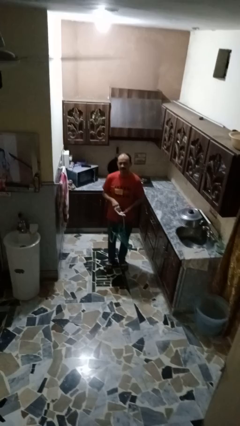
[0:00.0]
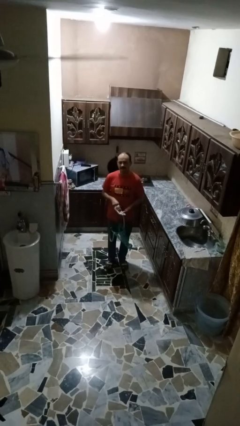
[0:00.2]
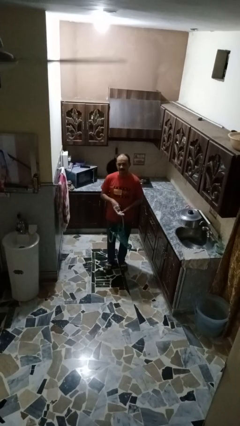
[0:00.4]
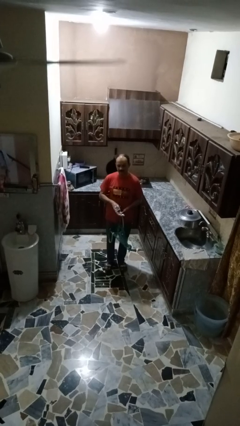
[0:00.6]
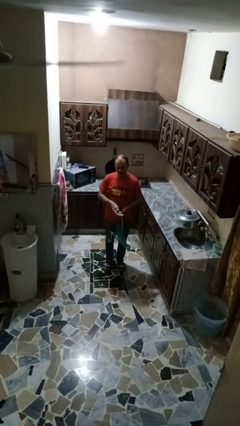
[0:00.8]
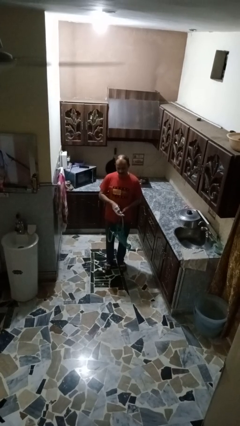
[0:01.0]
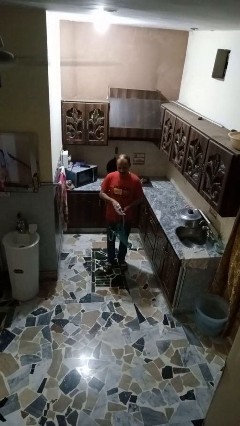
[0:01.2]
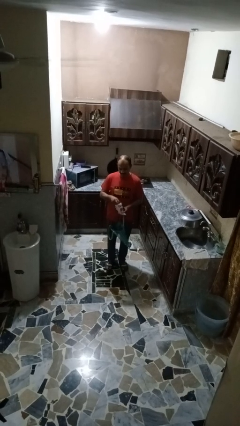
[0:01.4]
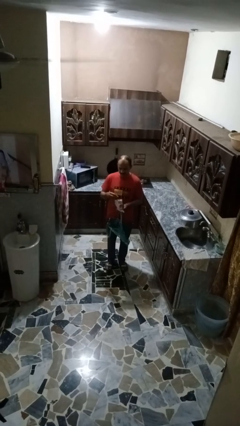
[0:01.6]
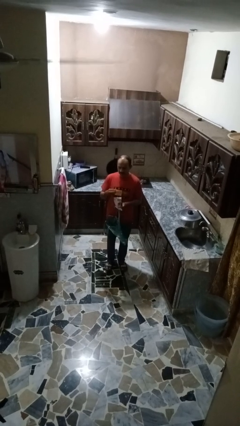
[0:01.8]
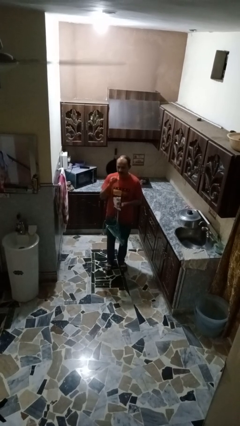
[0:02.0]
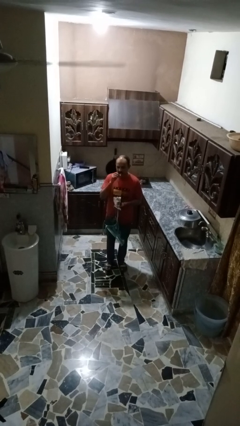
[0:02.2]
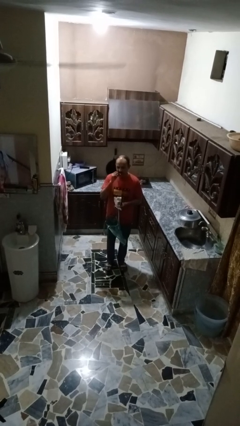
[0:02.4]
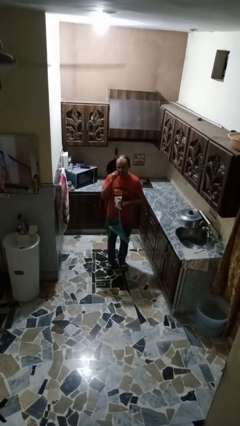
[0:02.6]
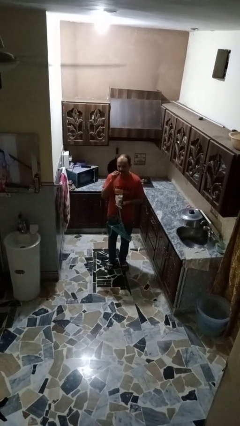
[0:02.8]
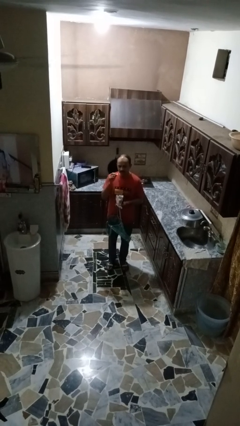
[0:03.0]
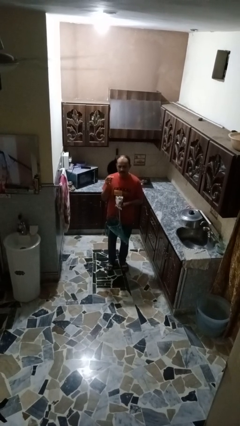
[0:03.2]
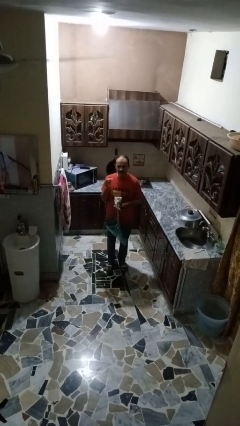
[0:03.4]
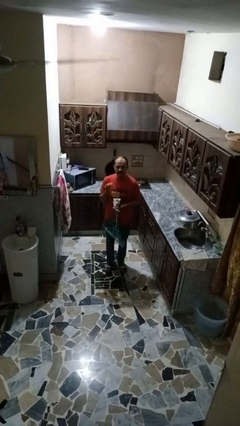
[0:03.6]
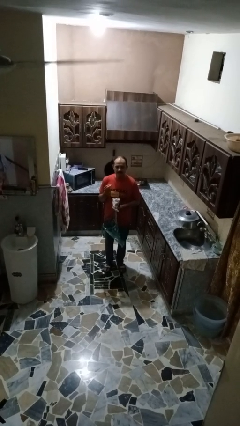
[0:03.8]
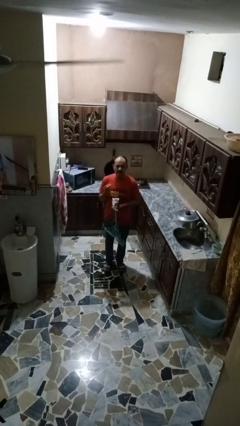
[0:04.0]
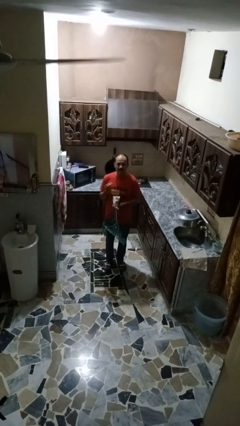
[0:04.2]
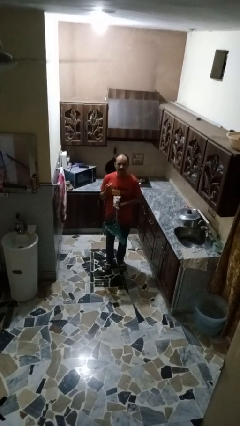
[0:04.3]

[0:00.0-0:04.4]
person eats snack from bag

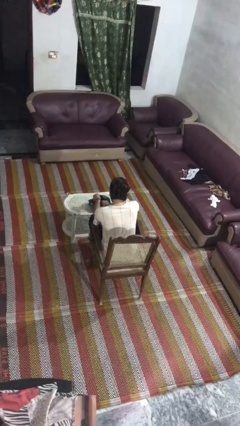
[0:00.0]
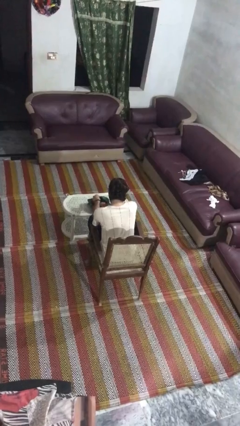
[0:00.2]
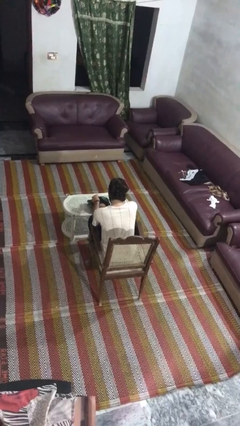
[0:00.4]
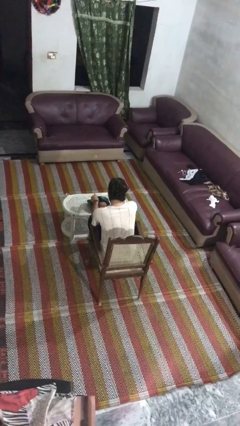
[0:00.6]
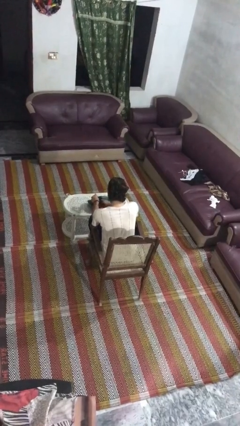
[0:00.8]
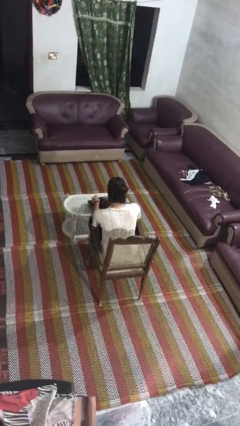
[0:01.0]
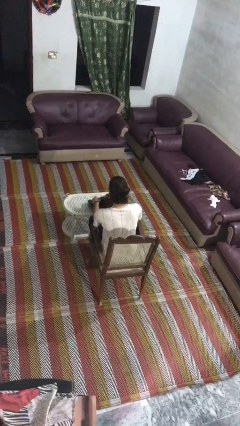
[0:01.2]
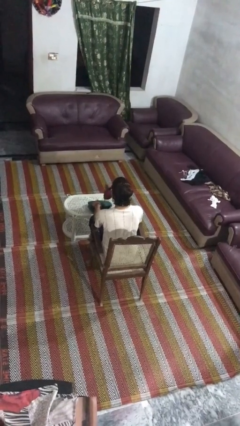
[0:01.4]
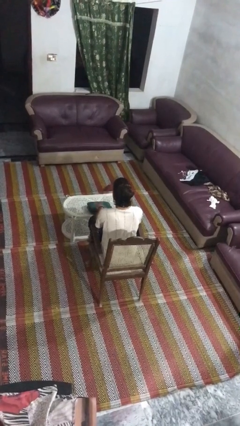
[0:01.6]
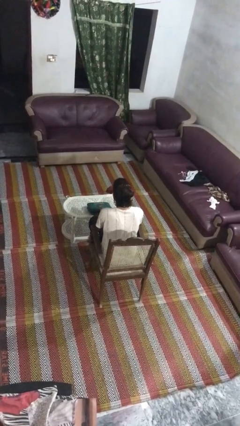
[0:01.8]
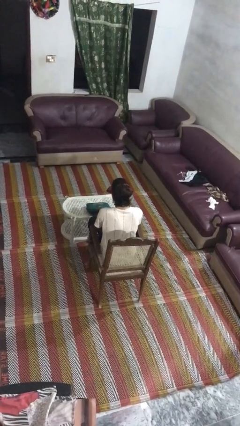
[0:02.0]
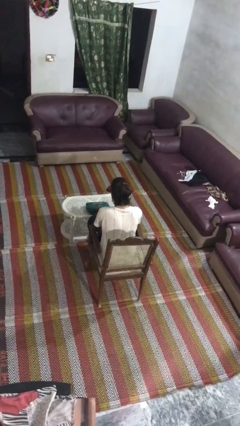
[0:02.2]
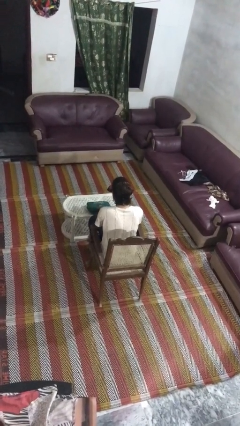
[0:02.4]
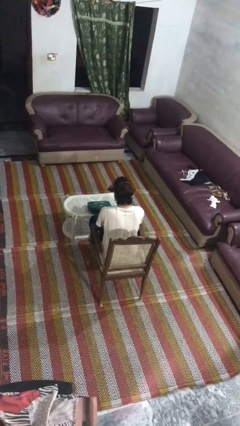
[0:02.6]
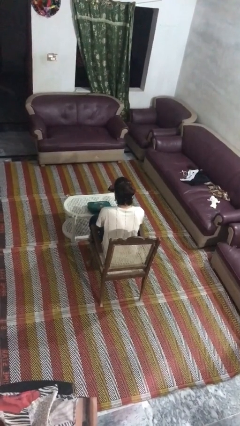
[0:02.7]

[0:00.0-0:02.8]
person takes object from purse

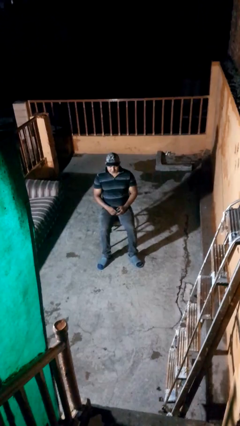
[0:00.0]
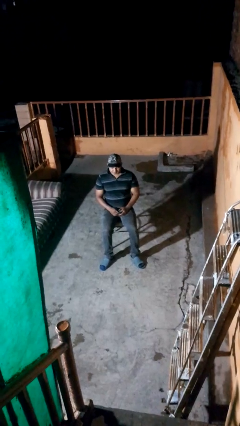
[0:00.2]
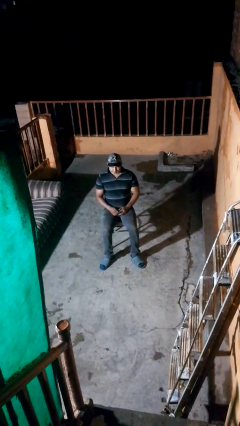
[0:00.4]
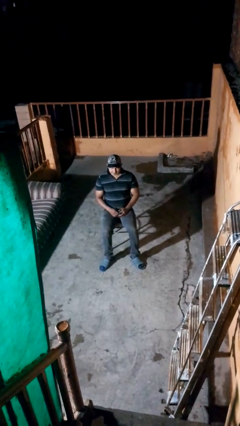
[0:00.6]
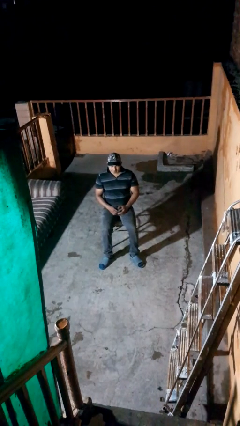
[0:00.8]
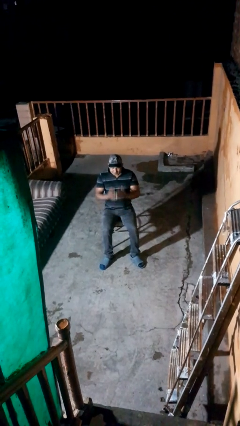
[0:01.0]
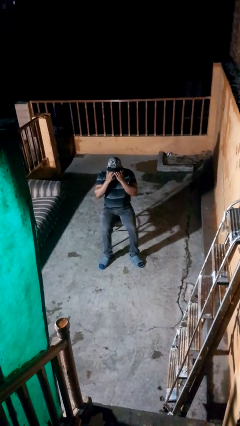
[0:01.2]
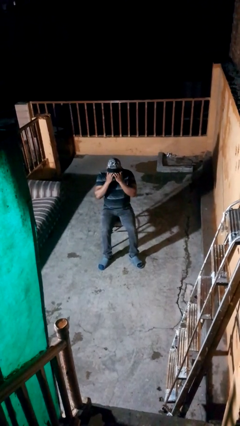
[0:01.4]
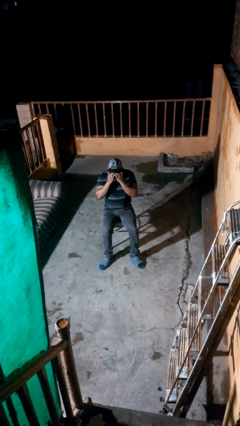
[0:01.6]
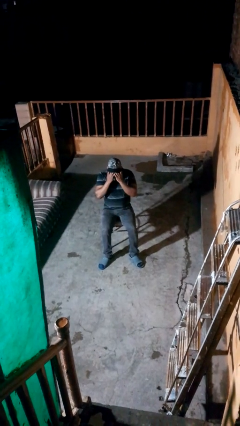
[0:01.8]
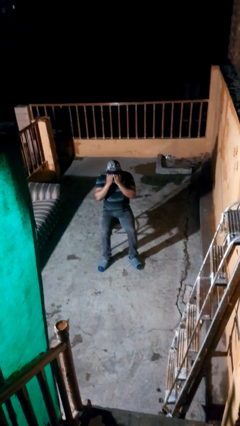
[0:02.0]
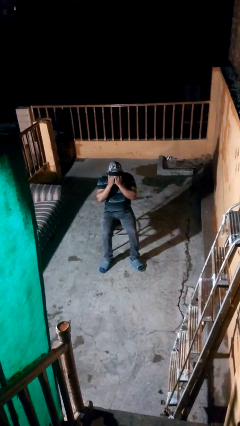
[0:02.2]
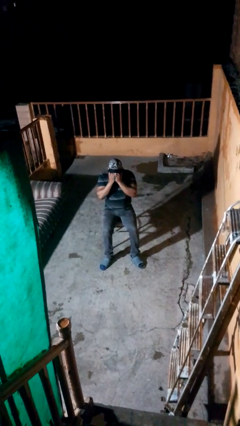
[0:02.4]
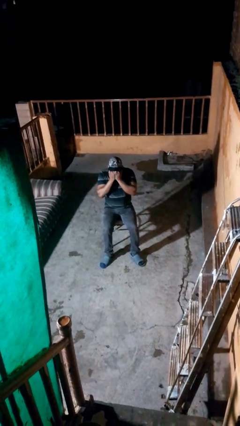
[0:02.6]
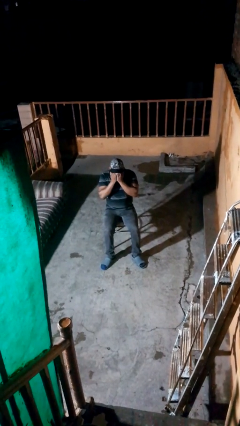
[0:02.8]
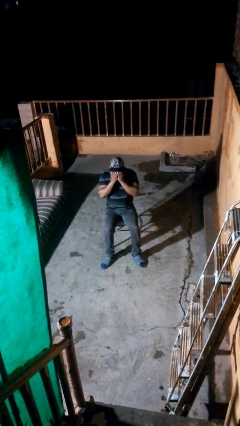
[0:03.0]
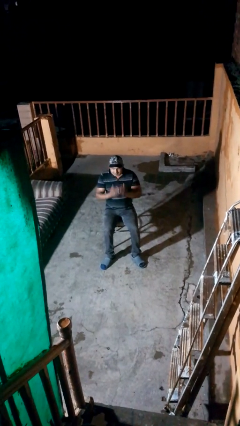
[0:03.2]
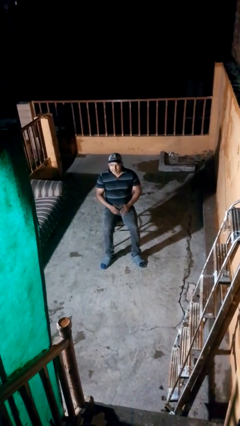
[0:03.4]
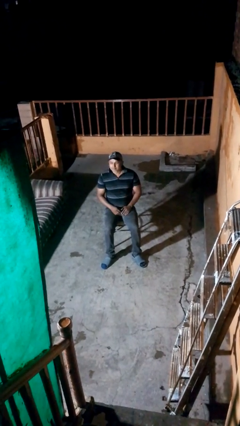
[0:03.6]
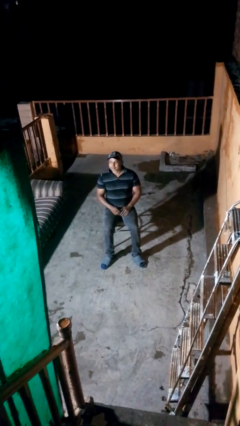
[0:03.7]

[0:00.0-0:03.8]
person covers face with hands

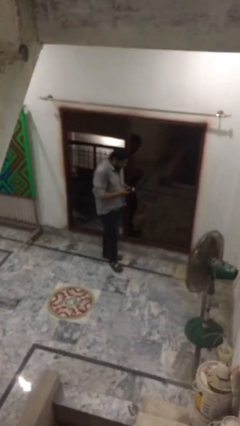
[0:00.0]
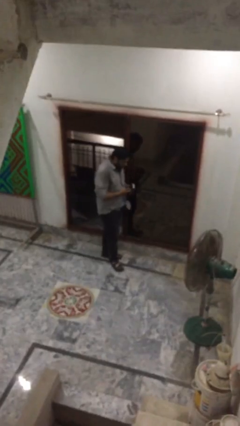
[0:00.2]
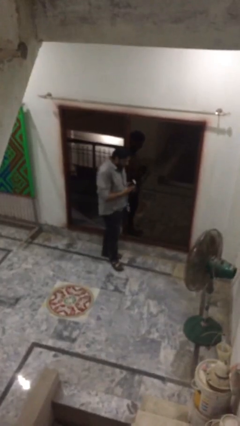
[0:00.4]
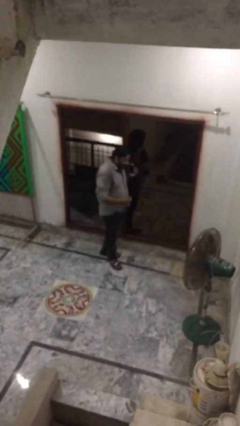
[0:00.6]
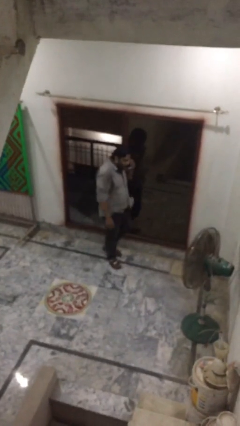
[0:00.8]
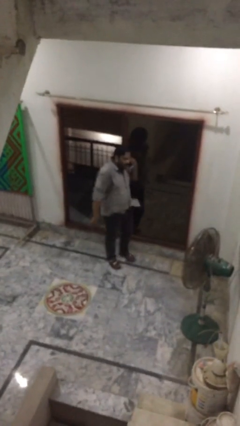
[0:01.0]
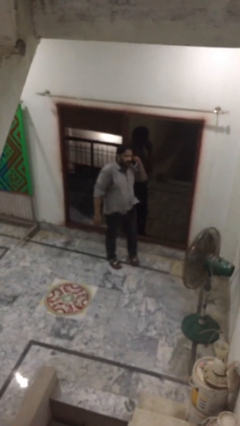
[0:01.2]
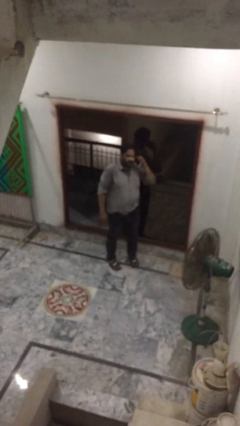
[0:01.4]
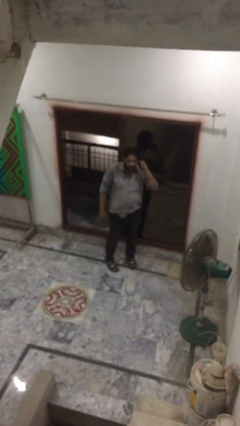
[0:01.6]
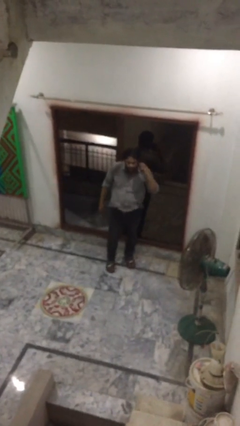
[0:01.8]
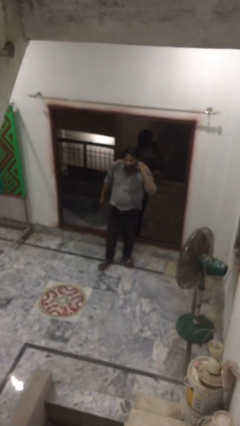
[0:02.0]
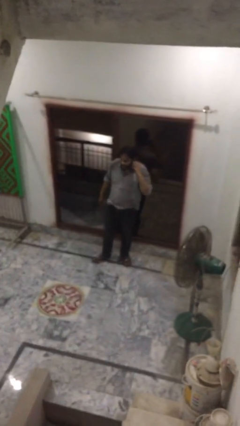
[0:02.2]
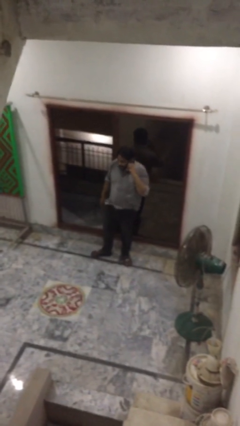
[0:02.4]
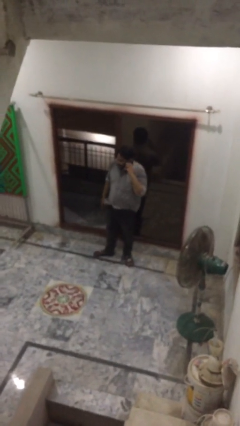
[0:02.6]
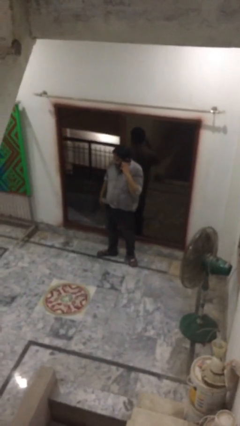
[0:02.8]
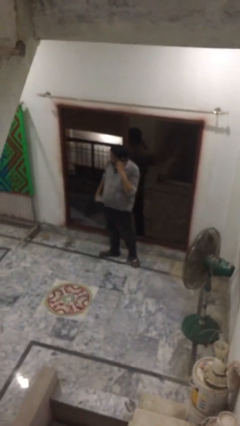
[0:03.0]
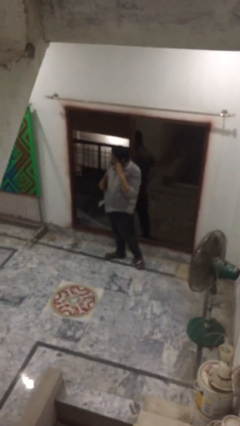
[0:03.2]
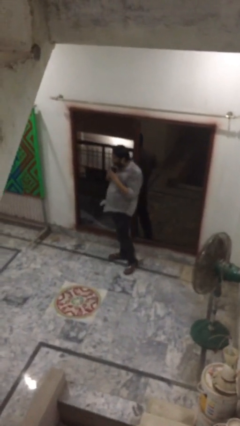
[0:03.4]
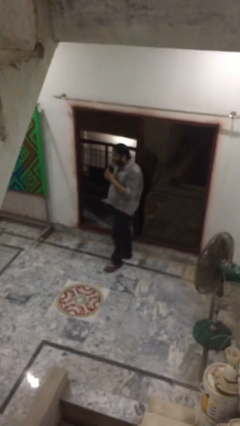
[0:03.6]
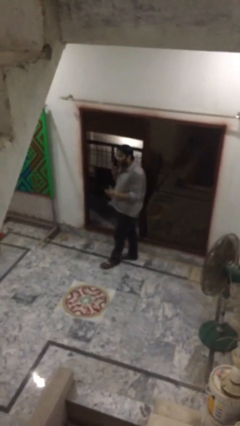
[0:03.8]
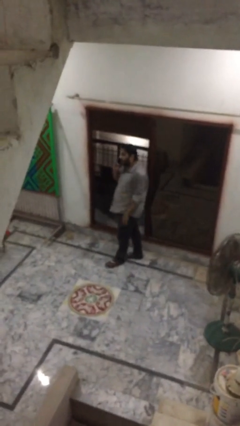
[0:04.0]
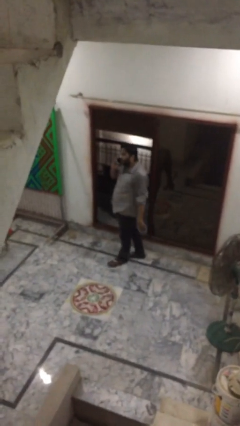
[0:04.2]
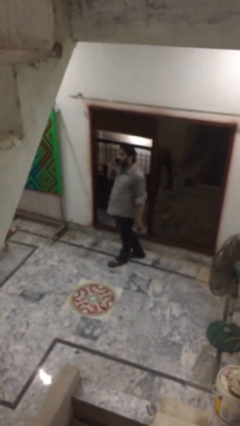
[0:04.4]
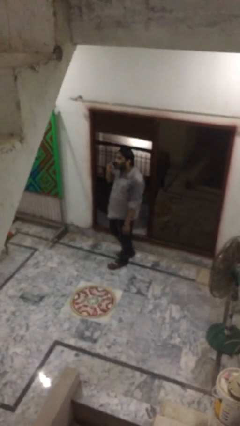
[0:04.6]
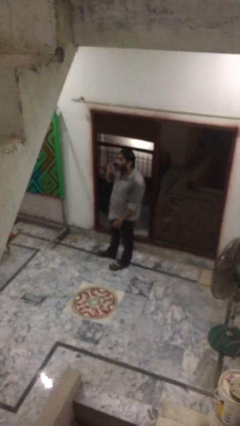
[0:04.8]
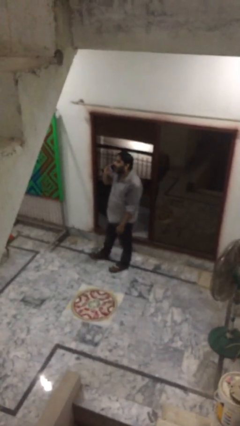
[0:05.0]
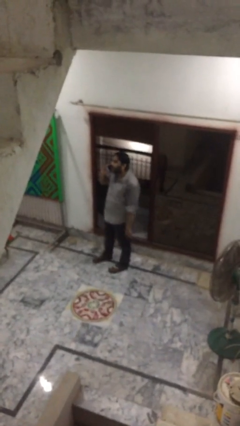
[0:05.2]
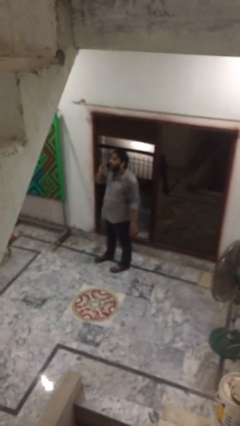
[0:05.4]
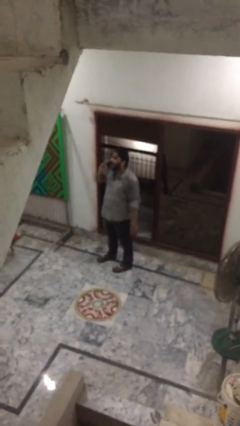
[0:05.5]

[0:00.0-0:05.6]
person talks on phone

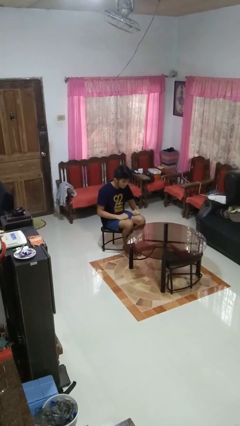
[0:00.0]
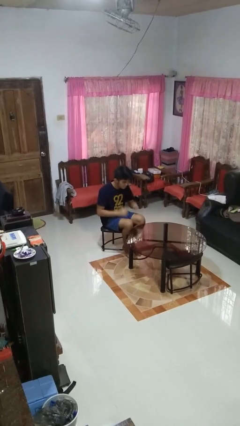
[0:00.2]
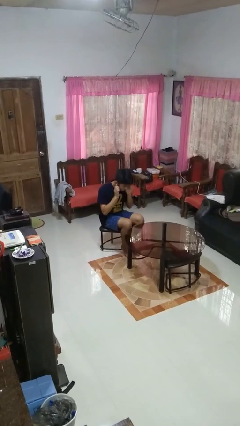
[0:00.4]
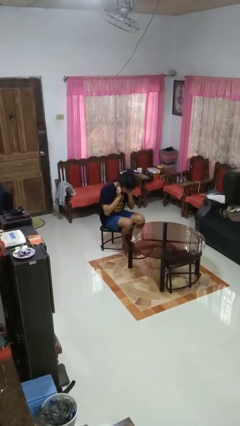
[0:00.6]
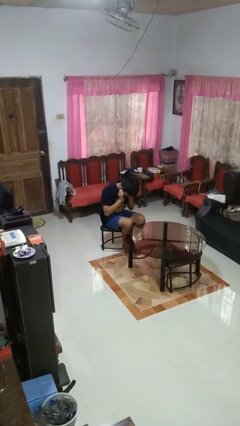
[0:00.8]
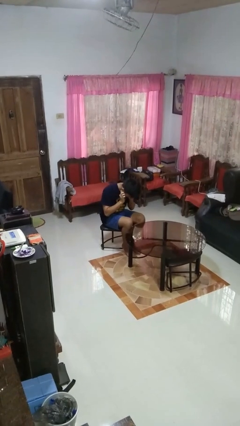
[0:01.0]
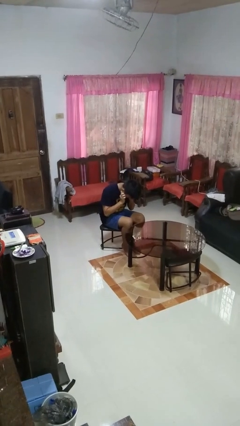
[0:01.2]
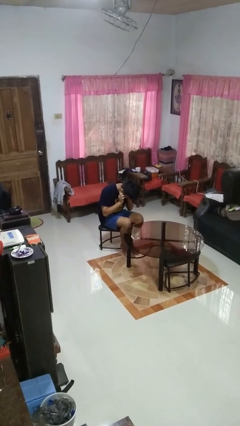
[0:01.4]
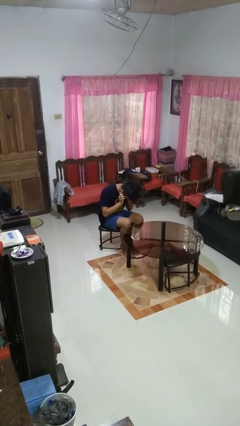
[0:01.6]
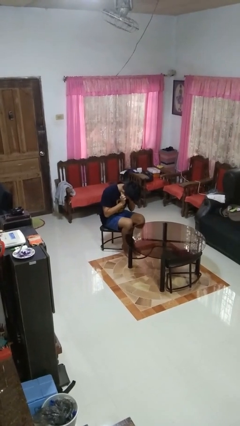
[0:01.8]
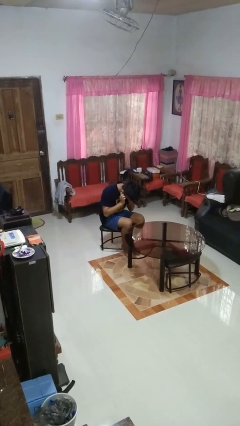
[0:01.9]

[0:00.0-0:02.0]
person puts fingers in ear
